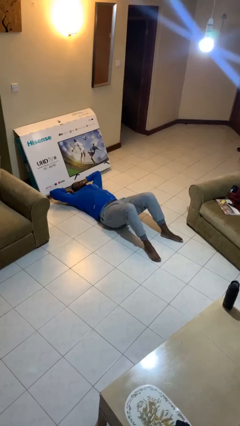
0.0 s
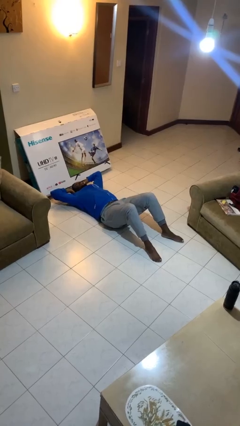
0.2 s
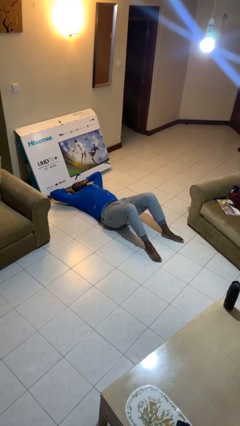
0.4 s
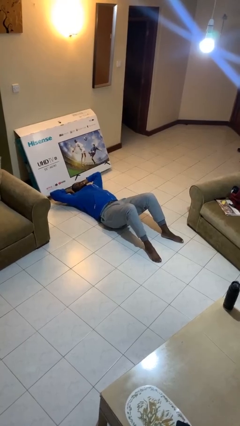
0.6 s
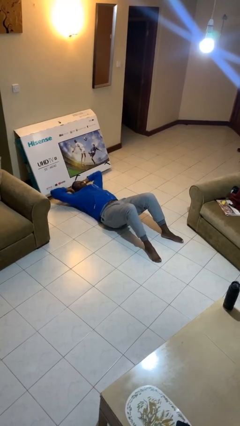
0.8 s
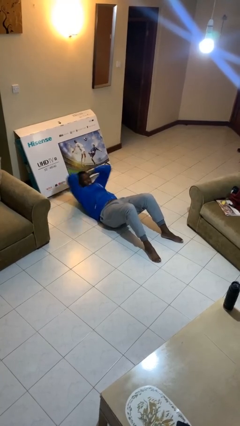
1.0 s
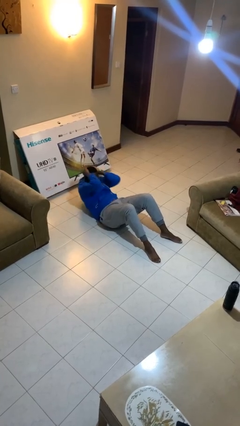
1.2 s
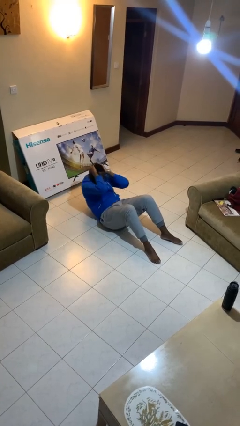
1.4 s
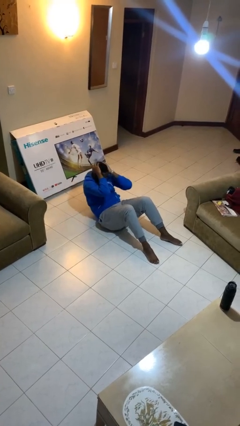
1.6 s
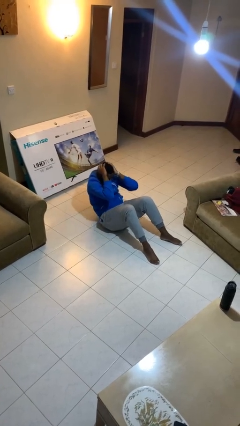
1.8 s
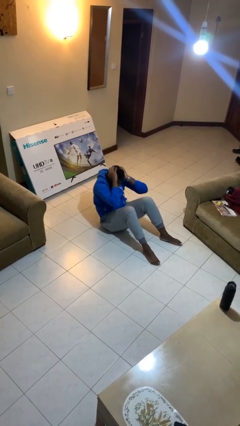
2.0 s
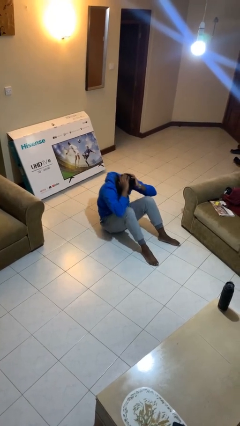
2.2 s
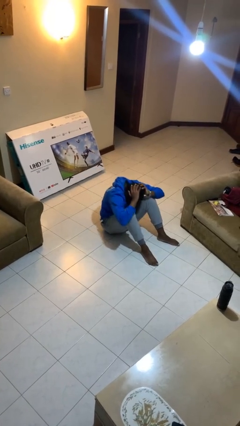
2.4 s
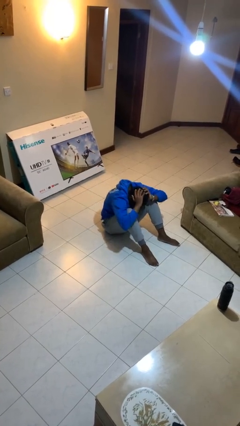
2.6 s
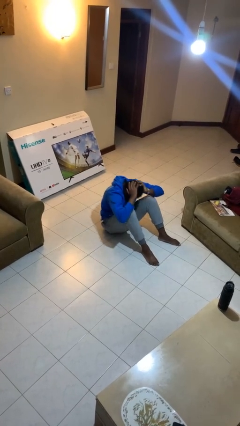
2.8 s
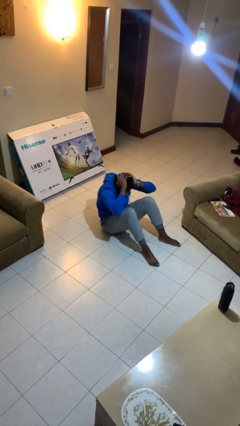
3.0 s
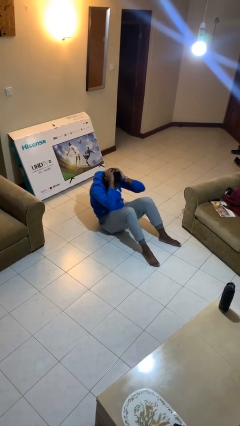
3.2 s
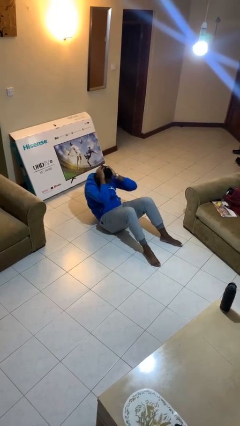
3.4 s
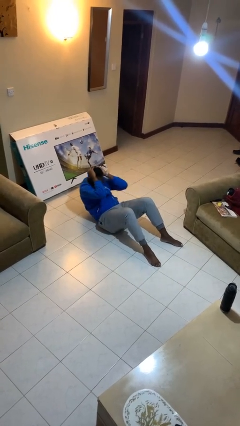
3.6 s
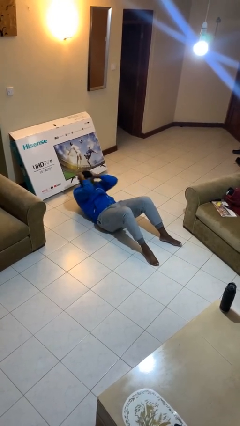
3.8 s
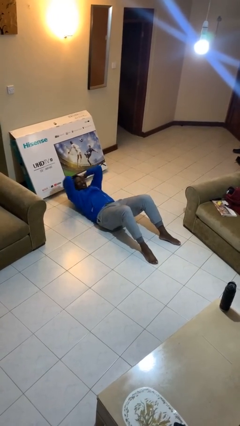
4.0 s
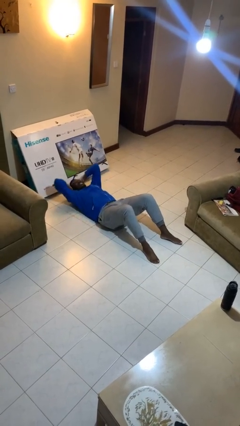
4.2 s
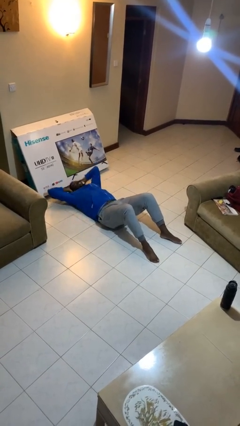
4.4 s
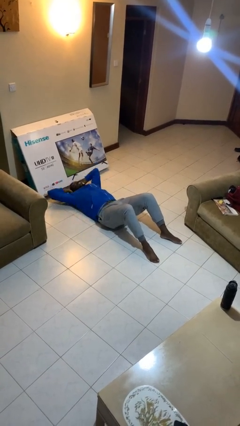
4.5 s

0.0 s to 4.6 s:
person exercises with situp

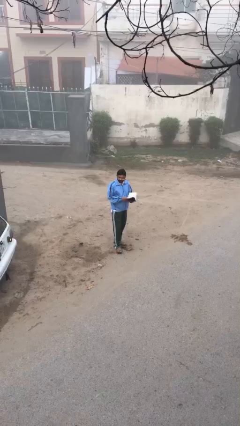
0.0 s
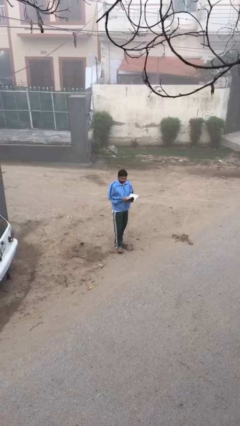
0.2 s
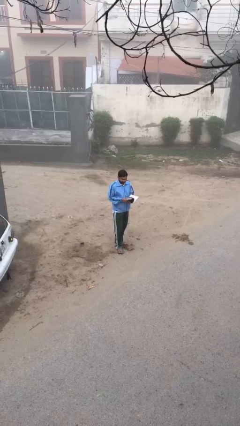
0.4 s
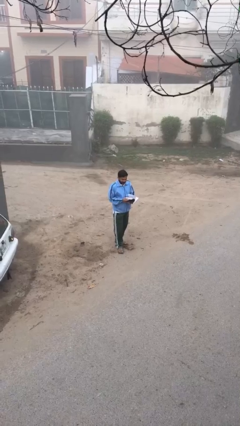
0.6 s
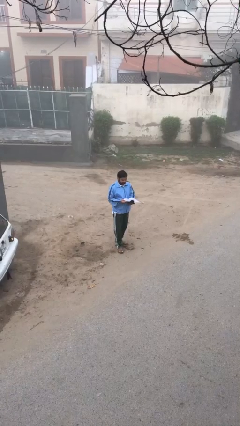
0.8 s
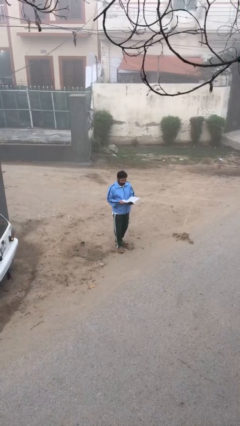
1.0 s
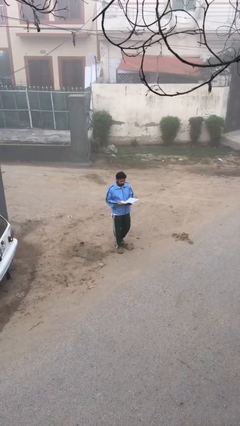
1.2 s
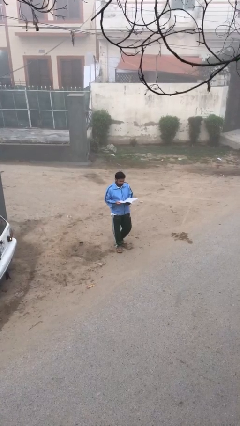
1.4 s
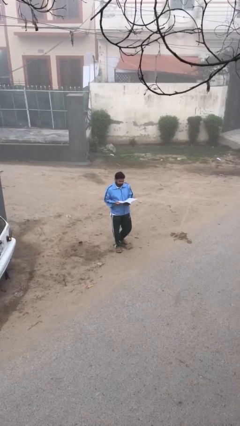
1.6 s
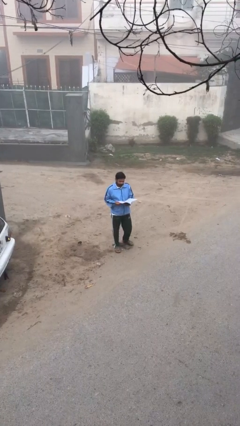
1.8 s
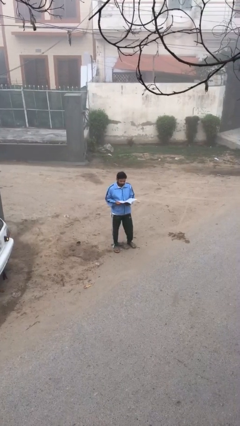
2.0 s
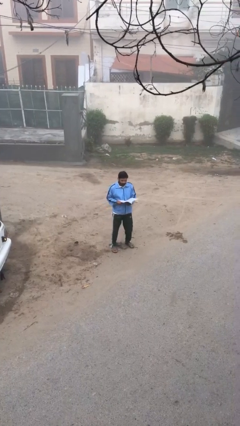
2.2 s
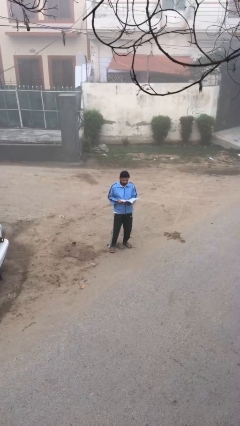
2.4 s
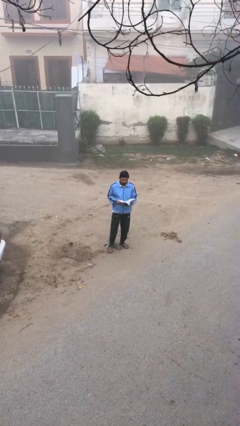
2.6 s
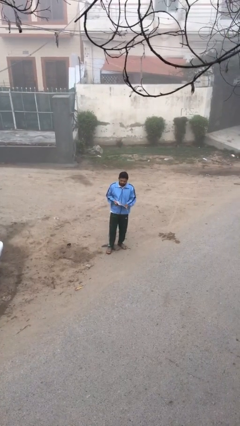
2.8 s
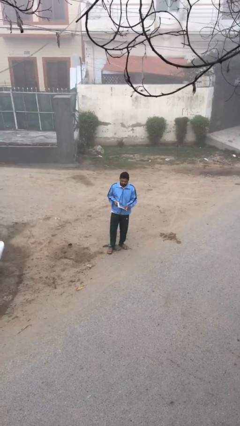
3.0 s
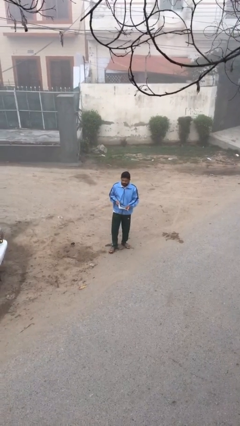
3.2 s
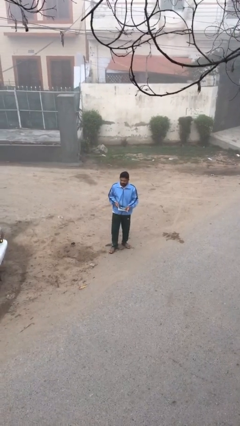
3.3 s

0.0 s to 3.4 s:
person reads document

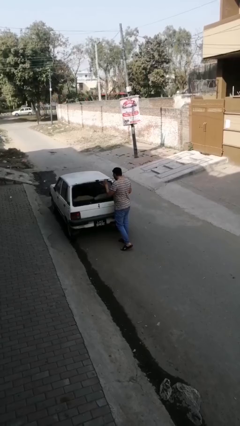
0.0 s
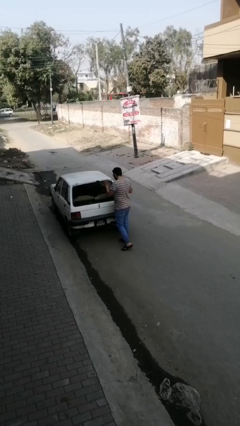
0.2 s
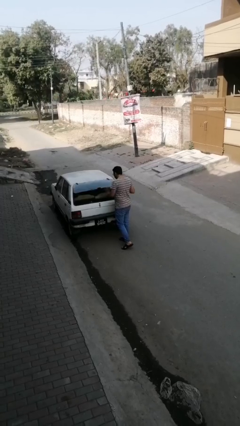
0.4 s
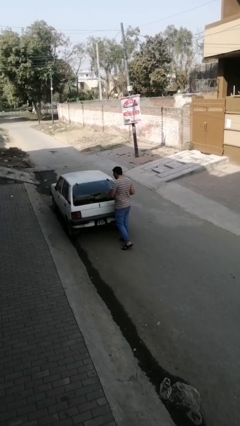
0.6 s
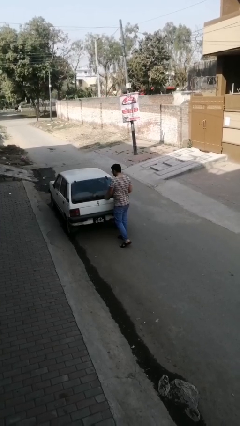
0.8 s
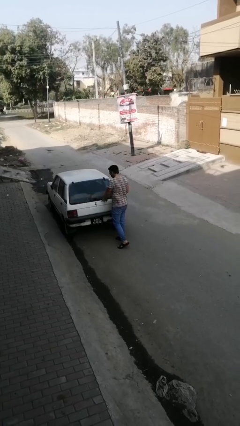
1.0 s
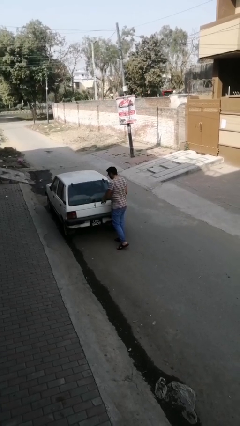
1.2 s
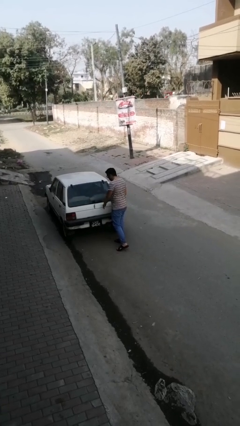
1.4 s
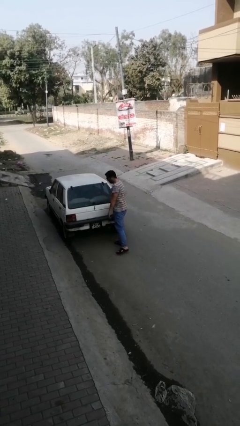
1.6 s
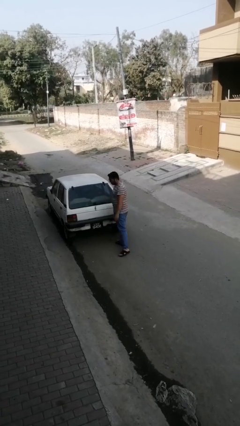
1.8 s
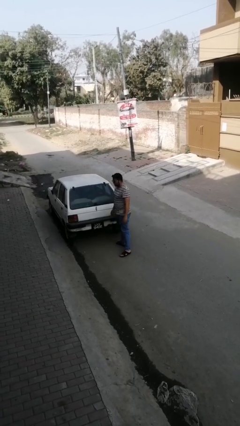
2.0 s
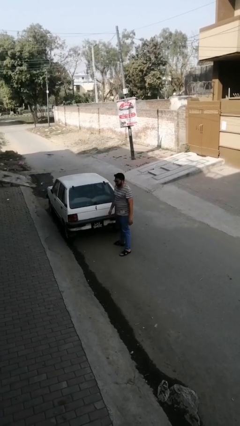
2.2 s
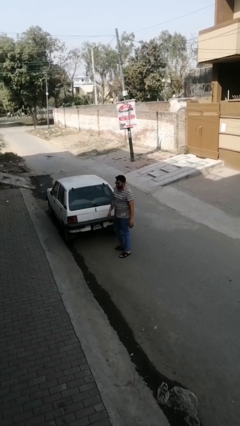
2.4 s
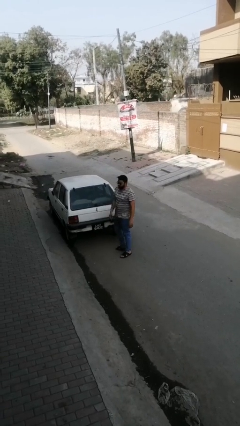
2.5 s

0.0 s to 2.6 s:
person closes car trunk

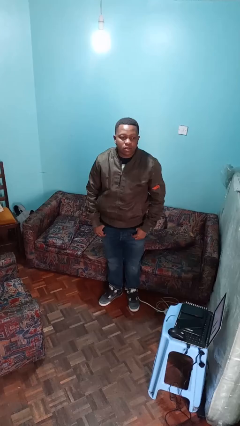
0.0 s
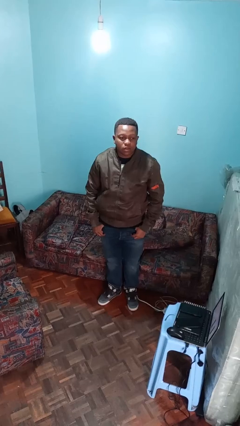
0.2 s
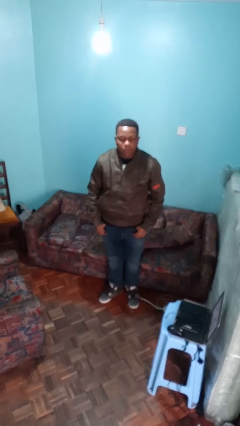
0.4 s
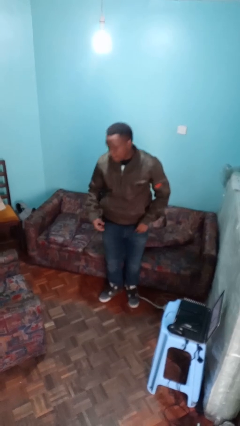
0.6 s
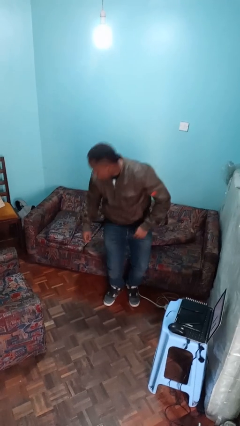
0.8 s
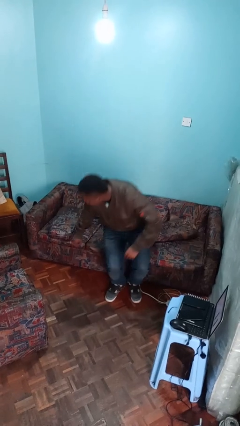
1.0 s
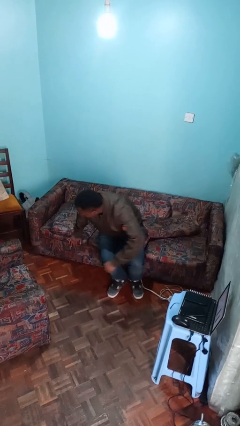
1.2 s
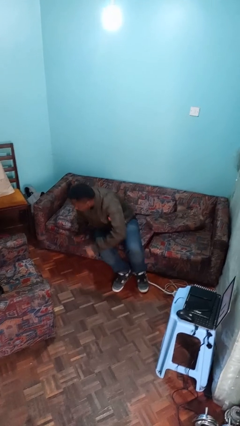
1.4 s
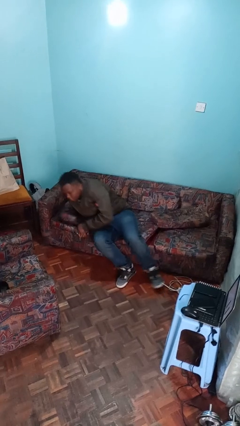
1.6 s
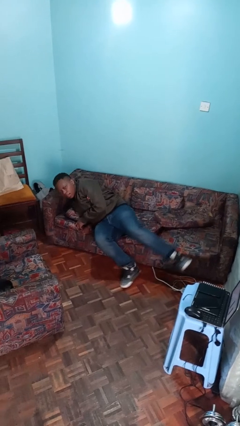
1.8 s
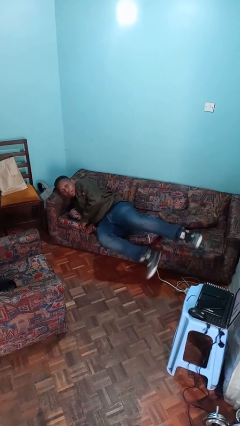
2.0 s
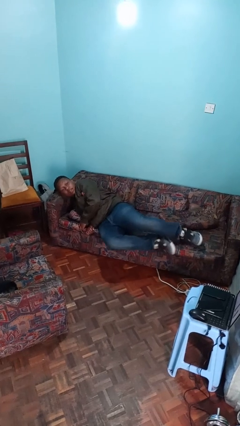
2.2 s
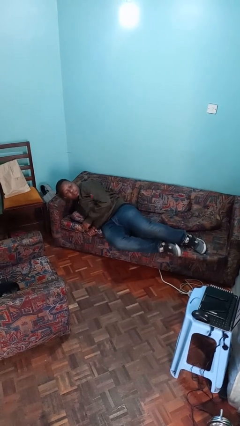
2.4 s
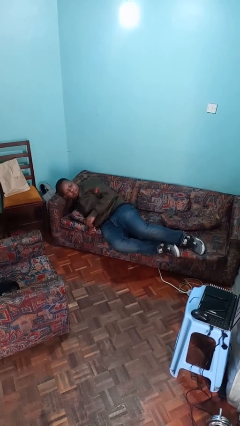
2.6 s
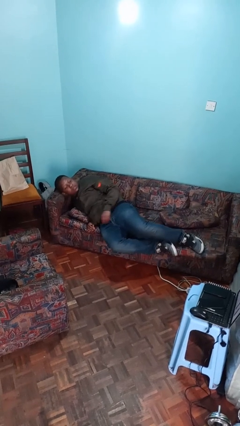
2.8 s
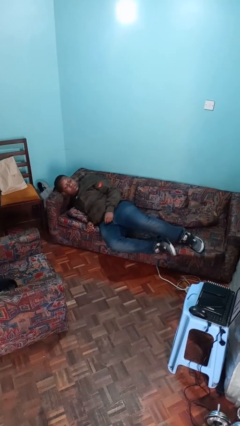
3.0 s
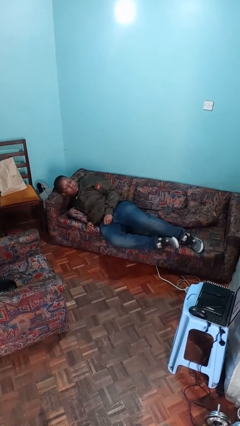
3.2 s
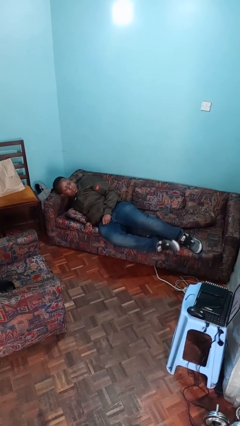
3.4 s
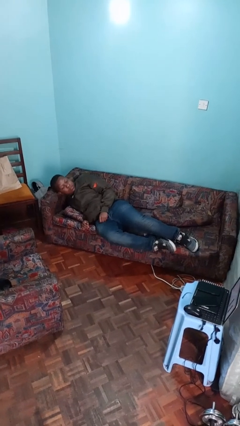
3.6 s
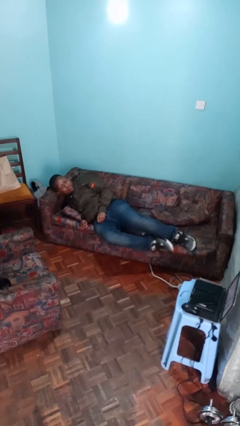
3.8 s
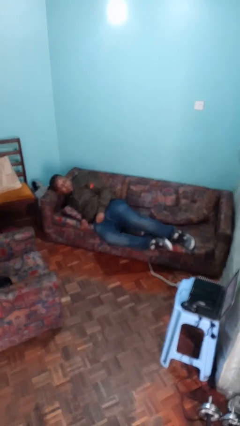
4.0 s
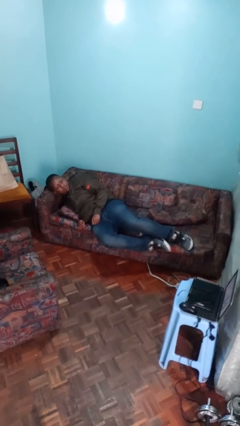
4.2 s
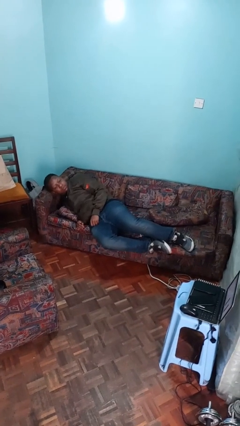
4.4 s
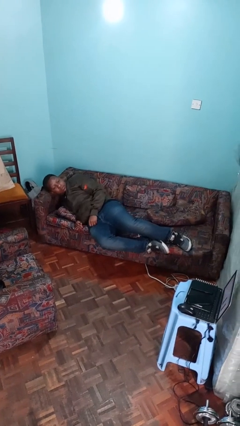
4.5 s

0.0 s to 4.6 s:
person lies down on couch

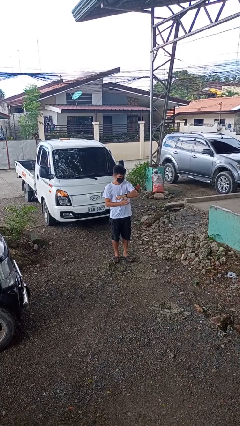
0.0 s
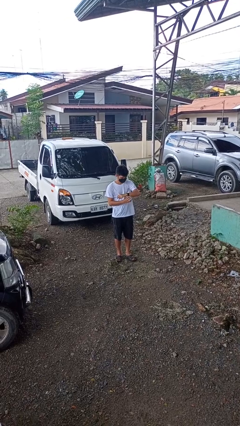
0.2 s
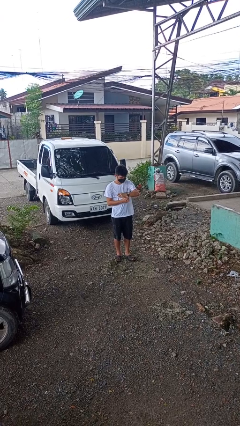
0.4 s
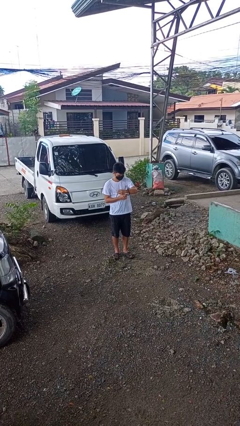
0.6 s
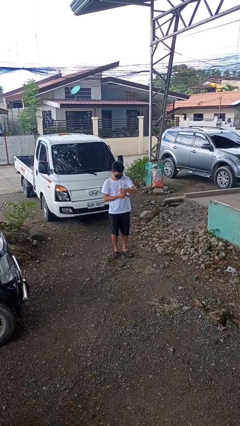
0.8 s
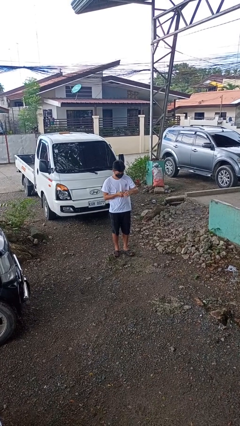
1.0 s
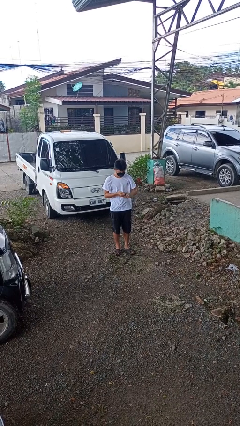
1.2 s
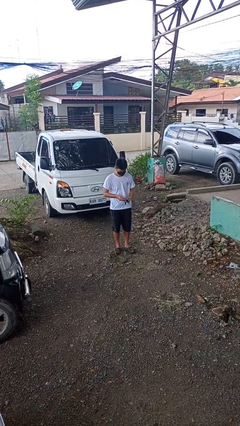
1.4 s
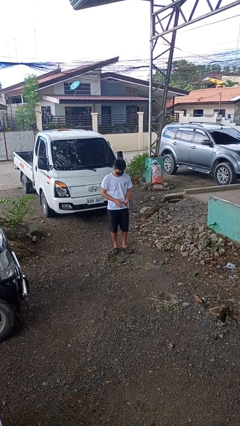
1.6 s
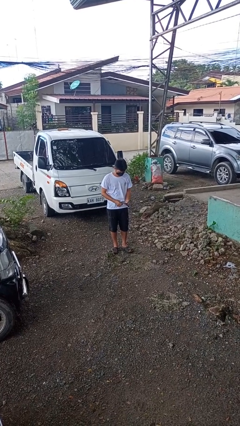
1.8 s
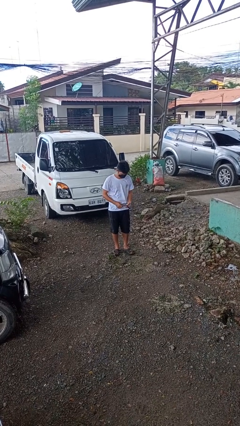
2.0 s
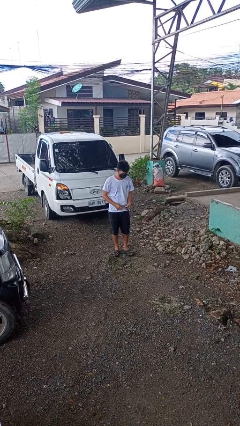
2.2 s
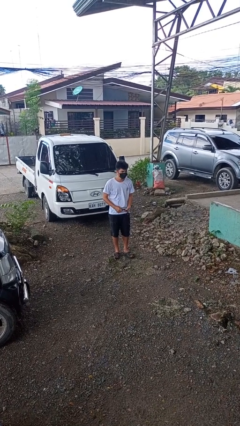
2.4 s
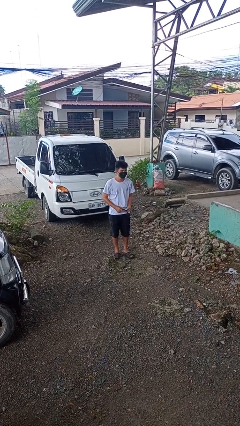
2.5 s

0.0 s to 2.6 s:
person takes off wristwatch
